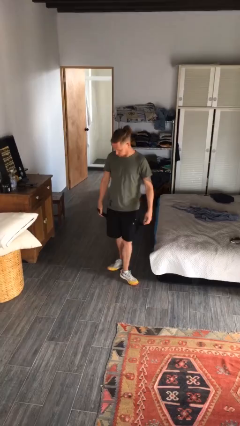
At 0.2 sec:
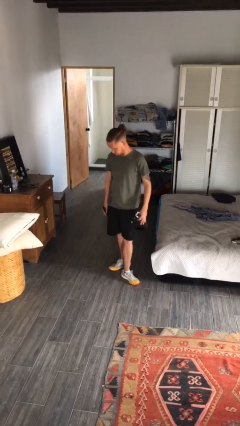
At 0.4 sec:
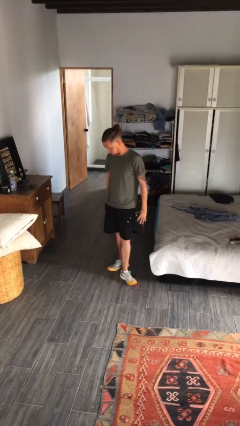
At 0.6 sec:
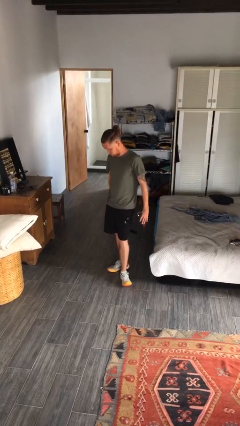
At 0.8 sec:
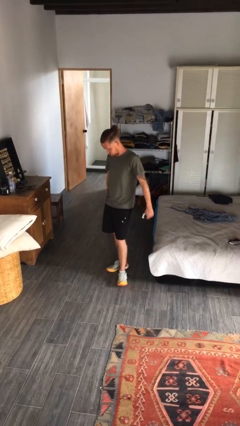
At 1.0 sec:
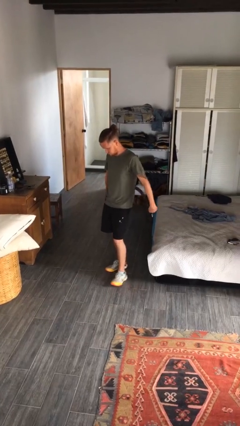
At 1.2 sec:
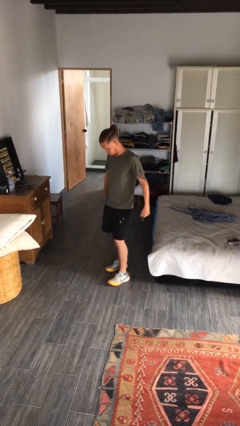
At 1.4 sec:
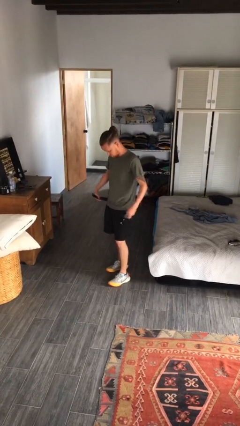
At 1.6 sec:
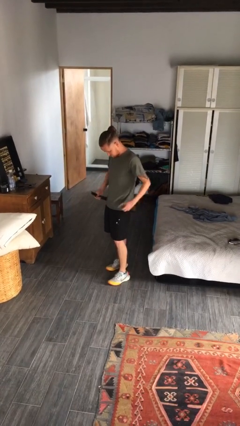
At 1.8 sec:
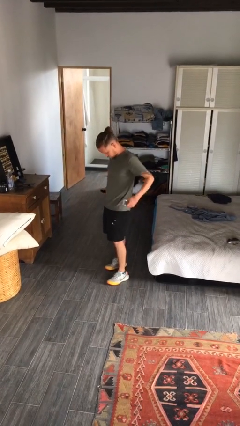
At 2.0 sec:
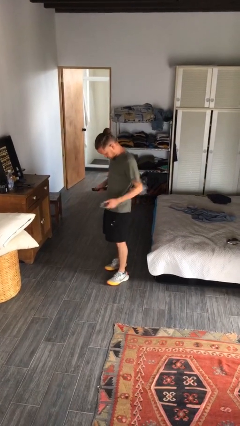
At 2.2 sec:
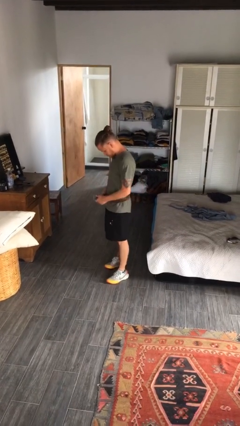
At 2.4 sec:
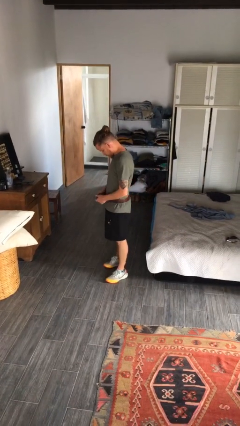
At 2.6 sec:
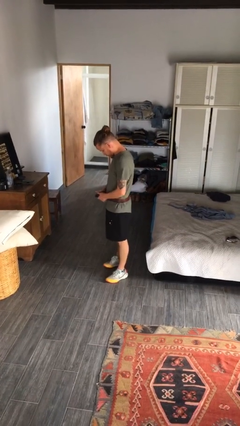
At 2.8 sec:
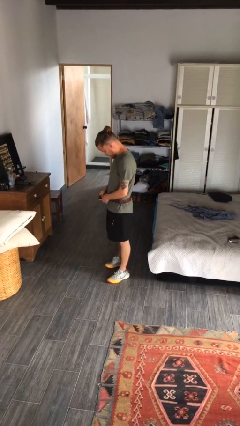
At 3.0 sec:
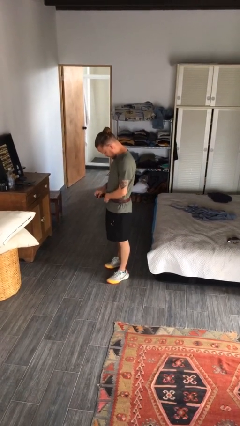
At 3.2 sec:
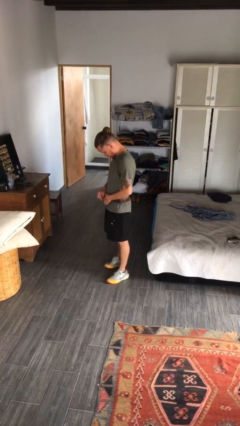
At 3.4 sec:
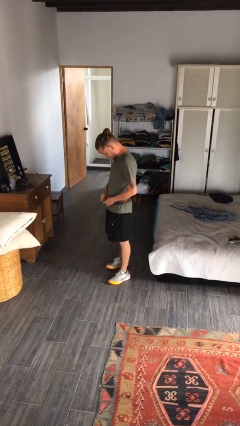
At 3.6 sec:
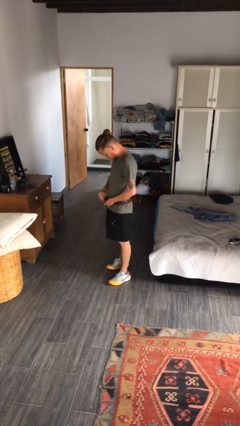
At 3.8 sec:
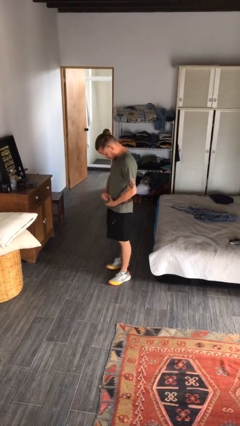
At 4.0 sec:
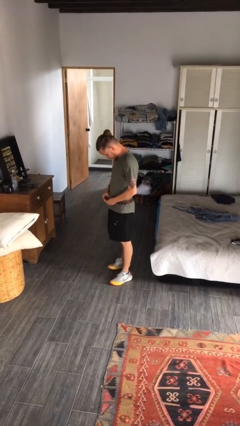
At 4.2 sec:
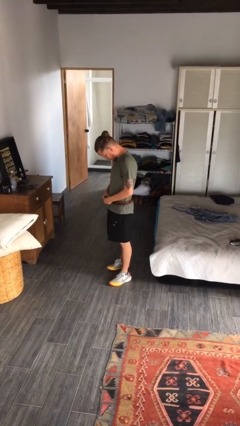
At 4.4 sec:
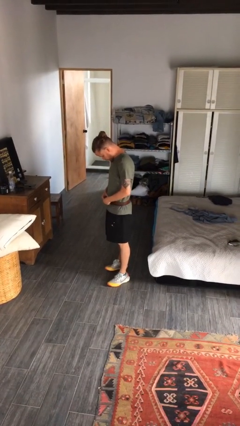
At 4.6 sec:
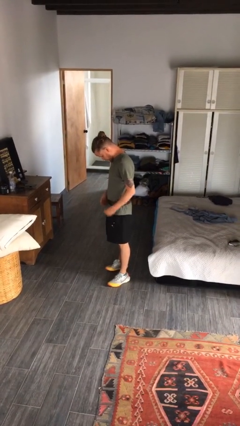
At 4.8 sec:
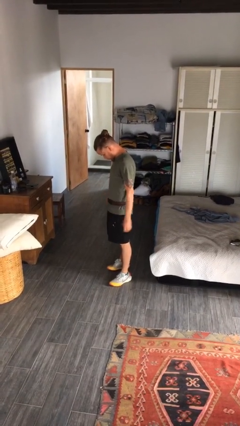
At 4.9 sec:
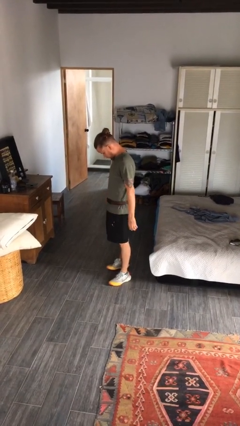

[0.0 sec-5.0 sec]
person puts on belt

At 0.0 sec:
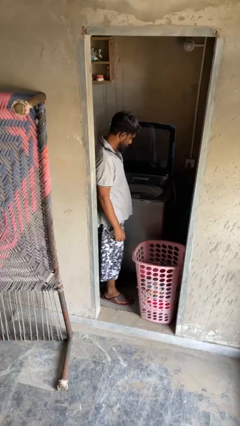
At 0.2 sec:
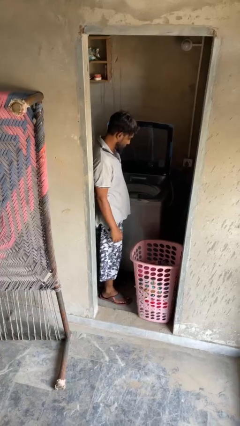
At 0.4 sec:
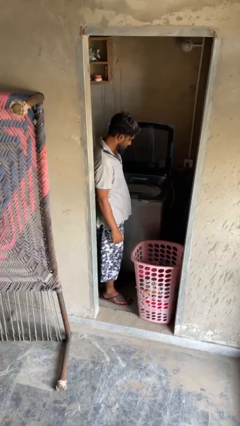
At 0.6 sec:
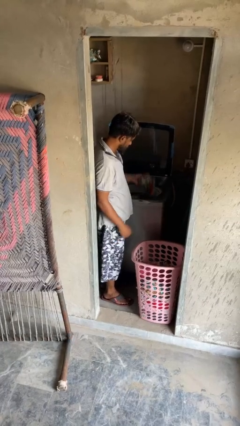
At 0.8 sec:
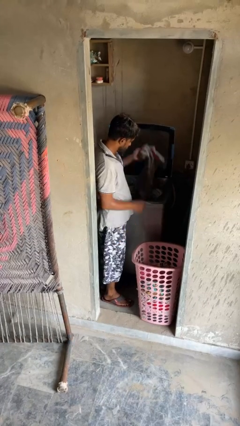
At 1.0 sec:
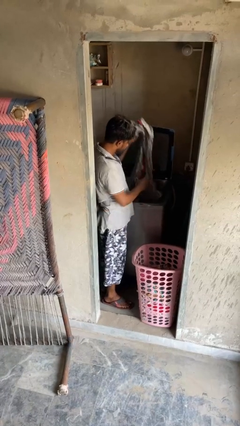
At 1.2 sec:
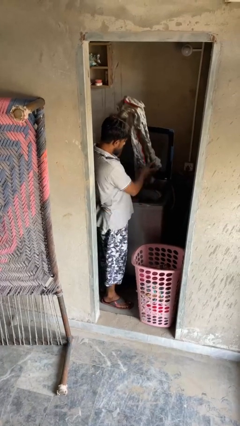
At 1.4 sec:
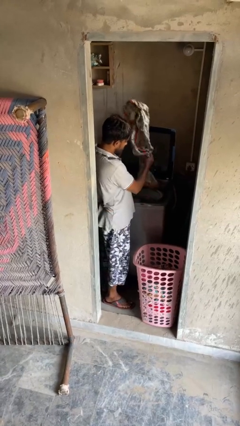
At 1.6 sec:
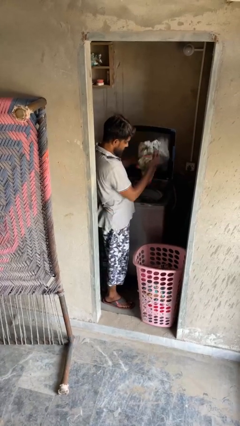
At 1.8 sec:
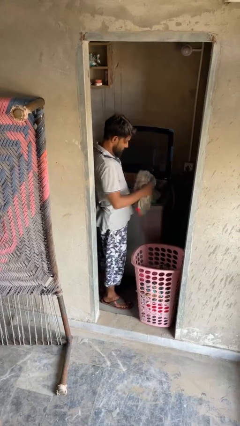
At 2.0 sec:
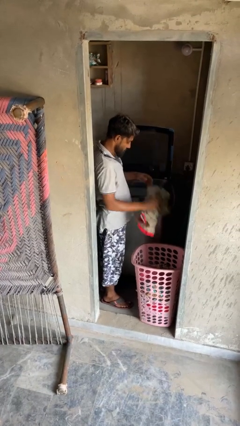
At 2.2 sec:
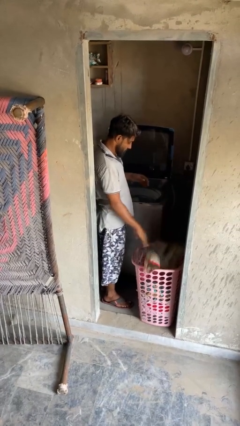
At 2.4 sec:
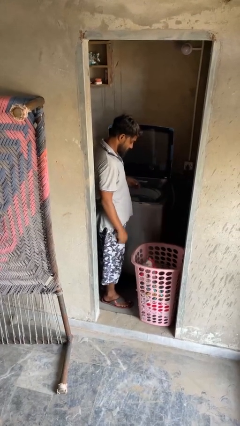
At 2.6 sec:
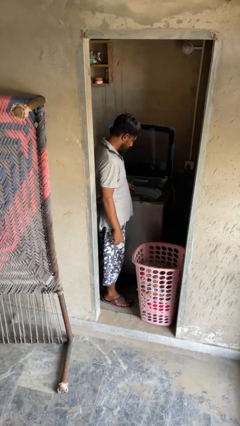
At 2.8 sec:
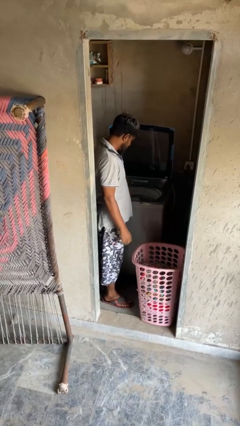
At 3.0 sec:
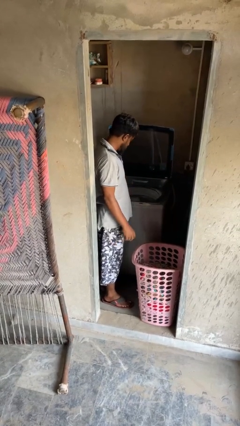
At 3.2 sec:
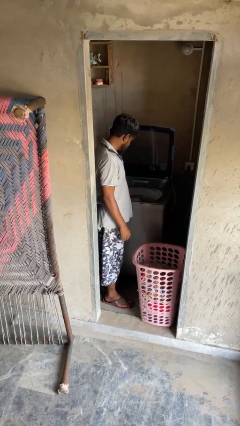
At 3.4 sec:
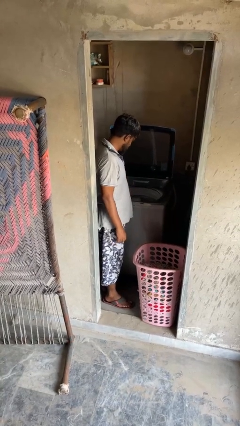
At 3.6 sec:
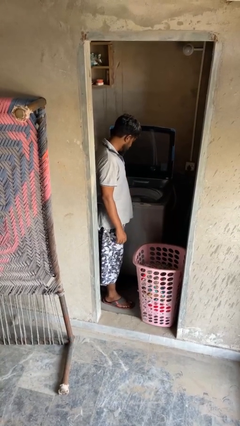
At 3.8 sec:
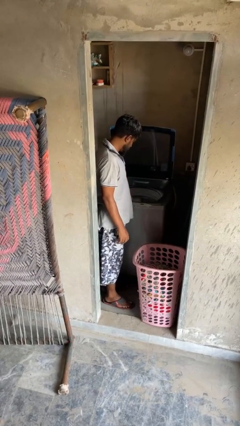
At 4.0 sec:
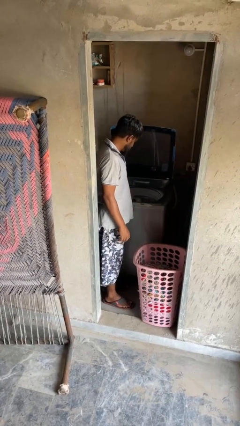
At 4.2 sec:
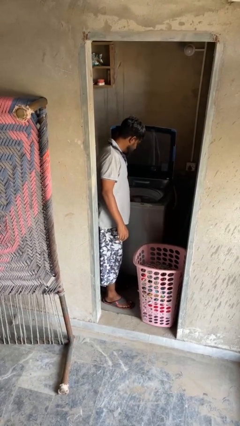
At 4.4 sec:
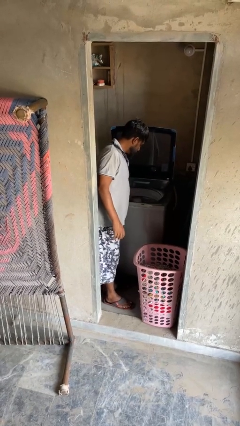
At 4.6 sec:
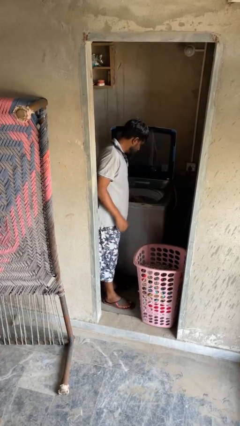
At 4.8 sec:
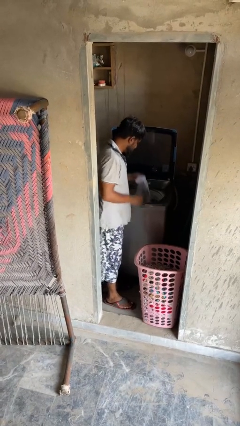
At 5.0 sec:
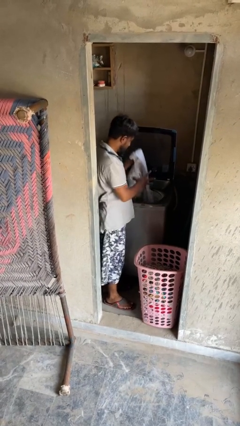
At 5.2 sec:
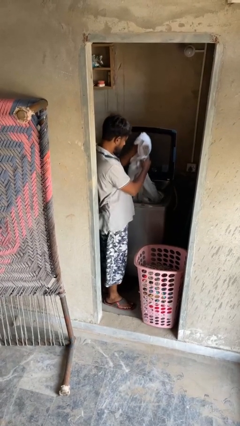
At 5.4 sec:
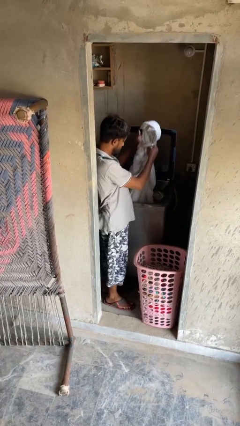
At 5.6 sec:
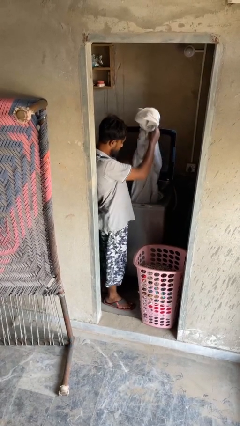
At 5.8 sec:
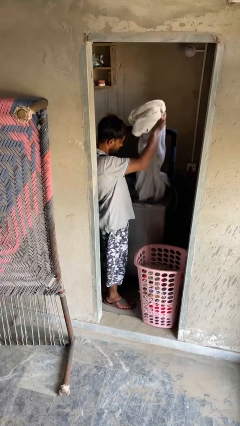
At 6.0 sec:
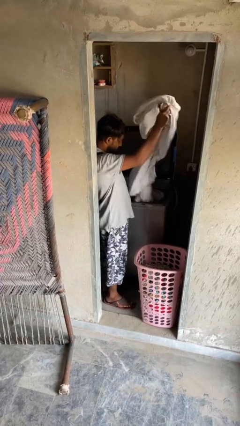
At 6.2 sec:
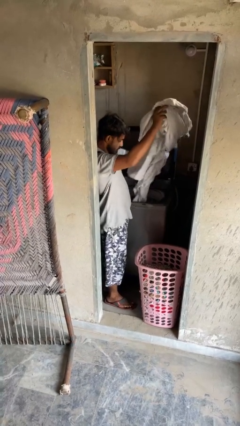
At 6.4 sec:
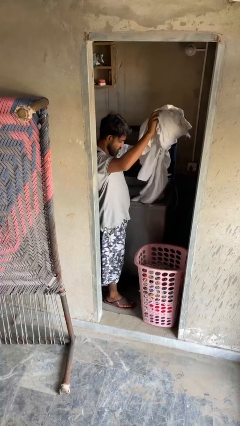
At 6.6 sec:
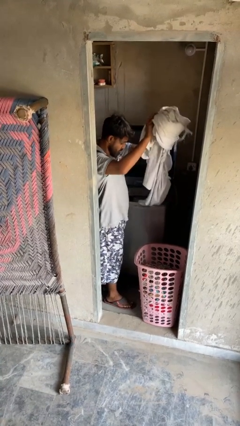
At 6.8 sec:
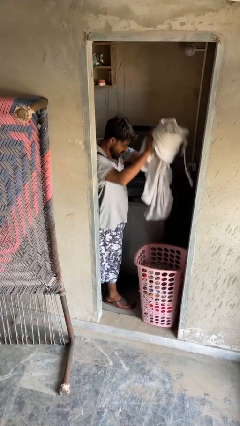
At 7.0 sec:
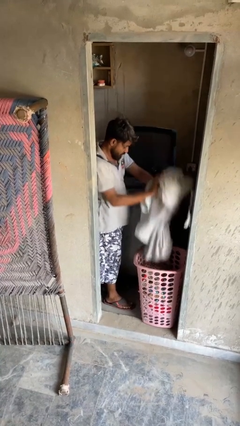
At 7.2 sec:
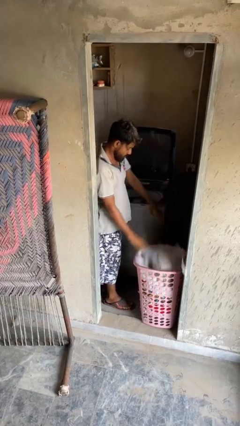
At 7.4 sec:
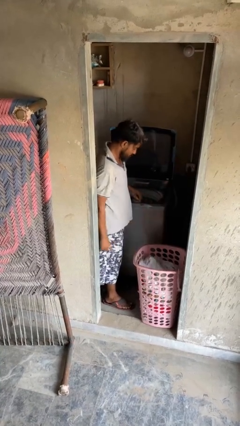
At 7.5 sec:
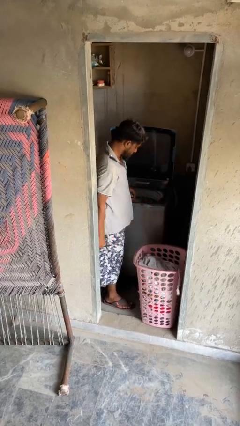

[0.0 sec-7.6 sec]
person loads clotheswasher

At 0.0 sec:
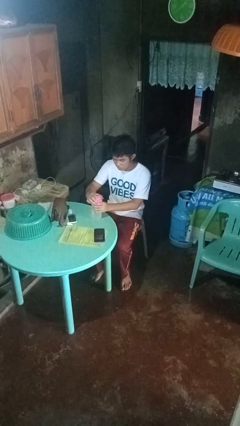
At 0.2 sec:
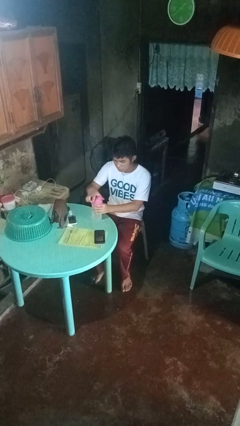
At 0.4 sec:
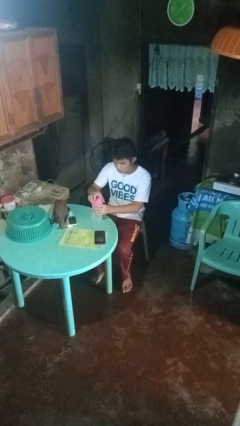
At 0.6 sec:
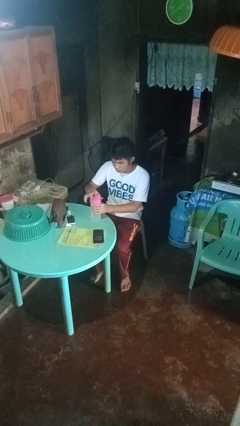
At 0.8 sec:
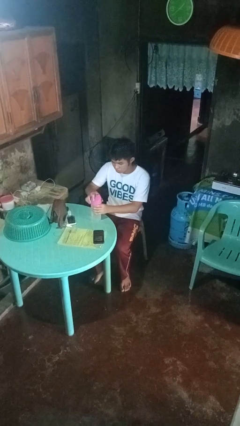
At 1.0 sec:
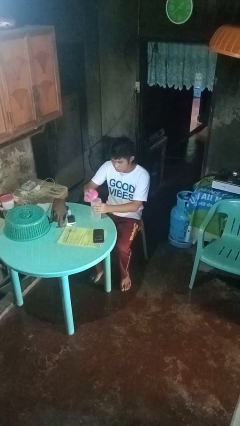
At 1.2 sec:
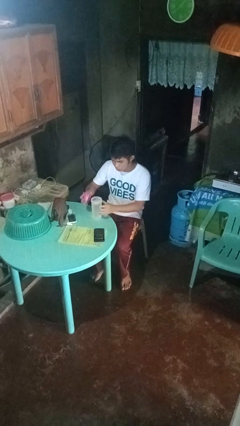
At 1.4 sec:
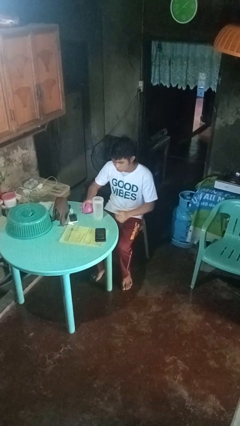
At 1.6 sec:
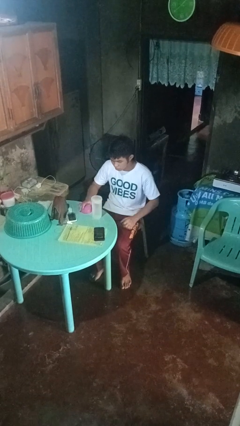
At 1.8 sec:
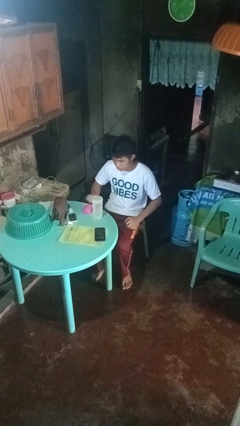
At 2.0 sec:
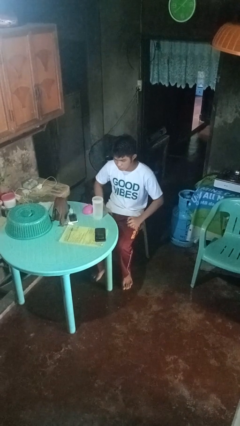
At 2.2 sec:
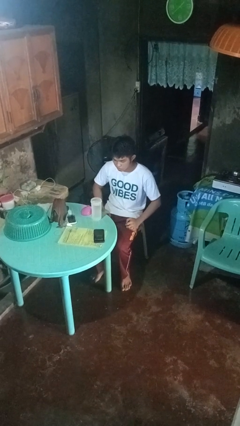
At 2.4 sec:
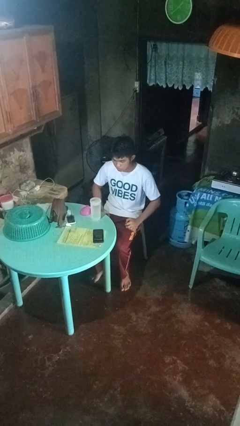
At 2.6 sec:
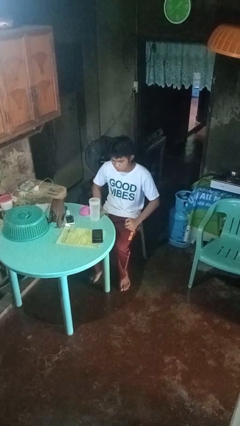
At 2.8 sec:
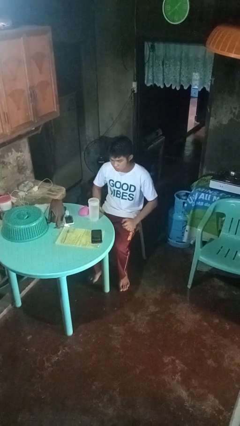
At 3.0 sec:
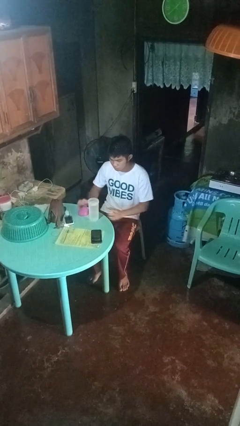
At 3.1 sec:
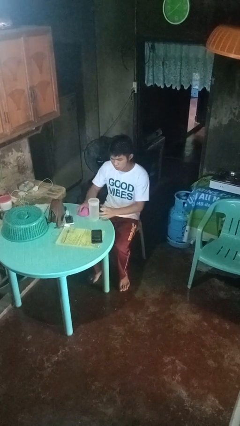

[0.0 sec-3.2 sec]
person unscrews lid from bottle

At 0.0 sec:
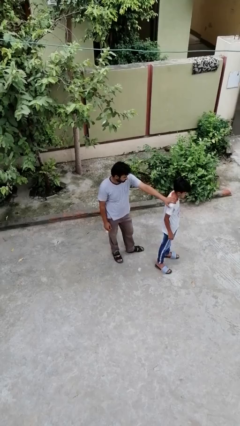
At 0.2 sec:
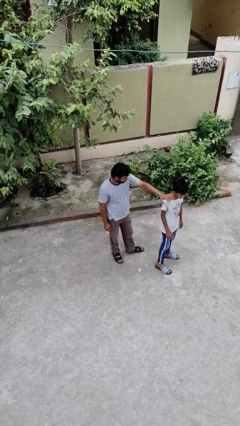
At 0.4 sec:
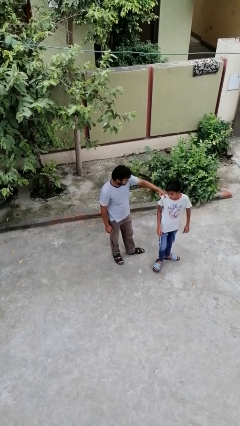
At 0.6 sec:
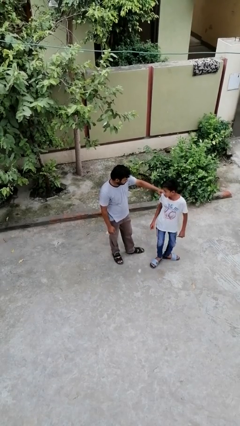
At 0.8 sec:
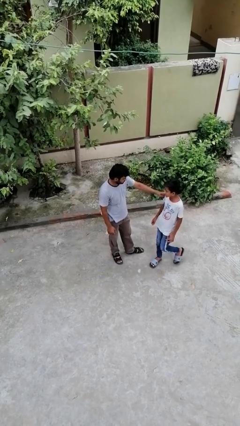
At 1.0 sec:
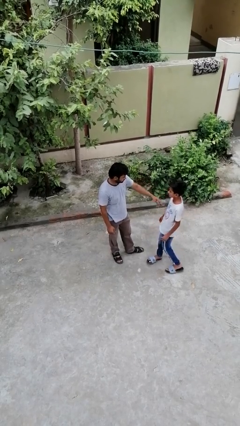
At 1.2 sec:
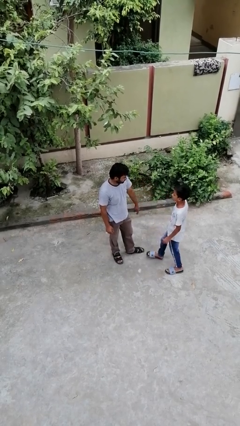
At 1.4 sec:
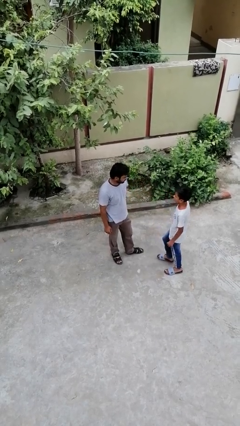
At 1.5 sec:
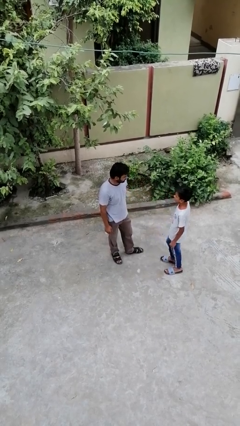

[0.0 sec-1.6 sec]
person spins person around

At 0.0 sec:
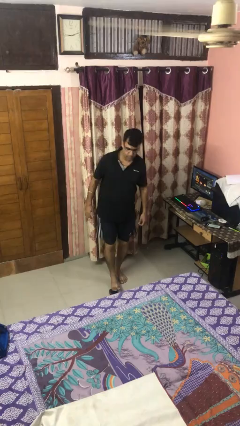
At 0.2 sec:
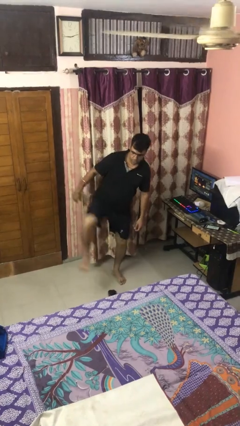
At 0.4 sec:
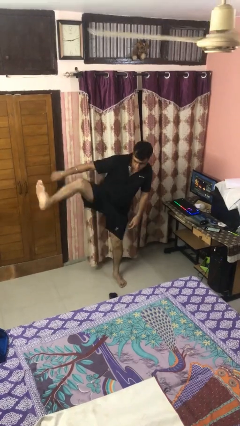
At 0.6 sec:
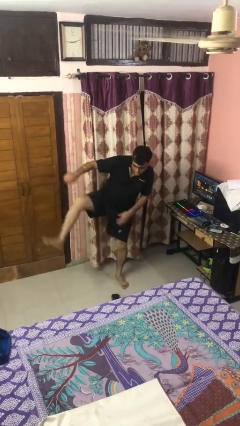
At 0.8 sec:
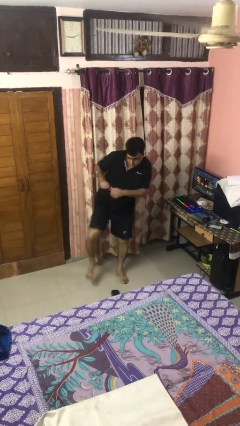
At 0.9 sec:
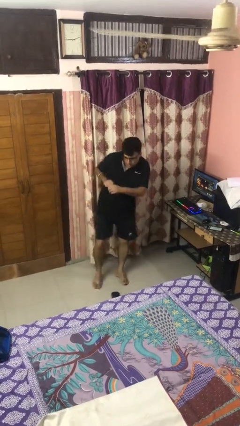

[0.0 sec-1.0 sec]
person karate kicks
